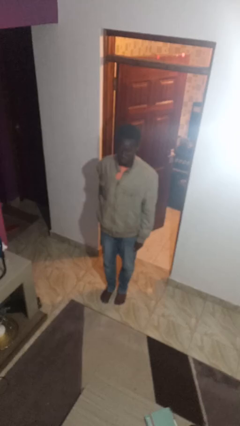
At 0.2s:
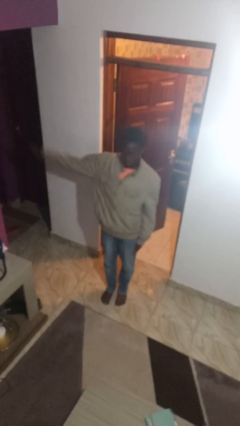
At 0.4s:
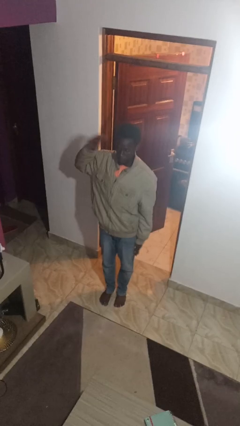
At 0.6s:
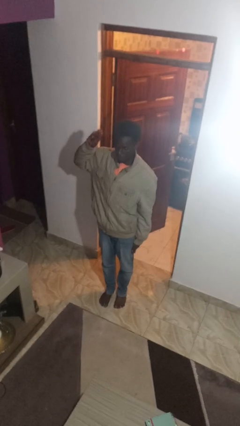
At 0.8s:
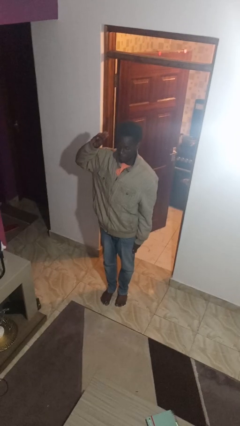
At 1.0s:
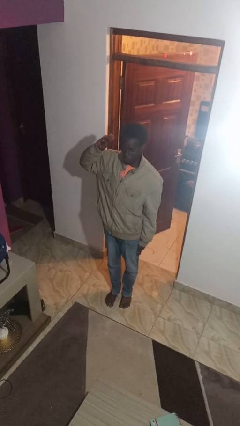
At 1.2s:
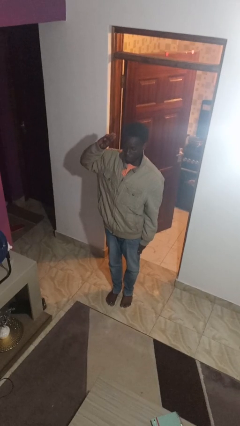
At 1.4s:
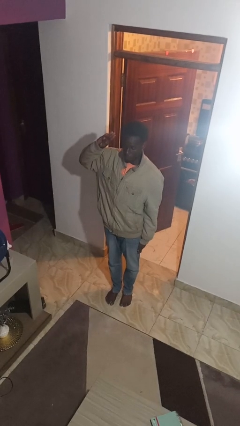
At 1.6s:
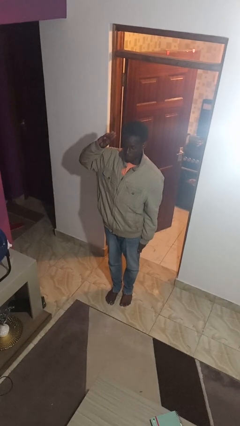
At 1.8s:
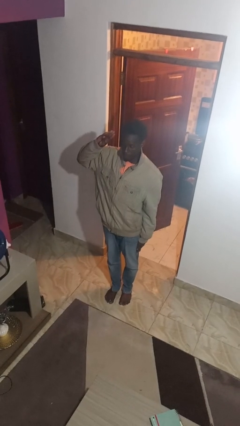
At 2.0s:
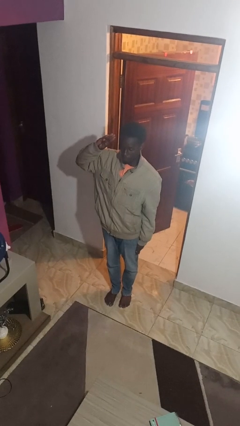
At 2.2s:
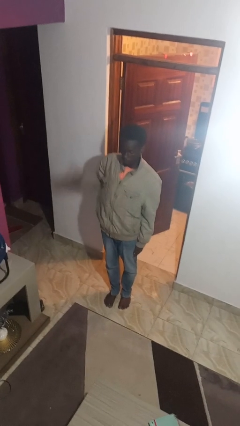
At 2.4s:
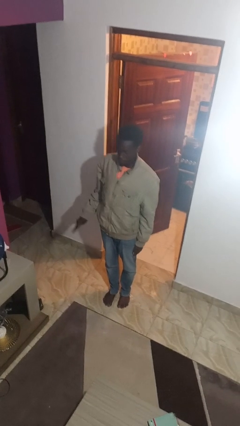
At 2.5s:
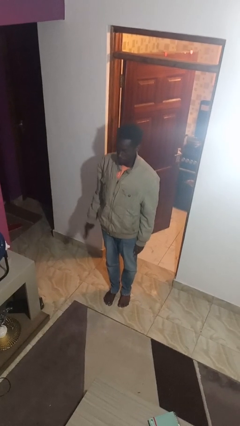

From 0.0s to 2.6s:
person salutes

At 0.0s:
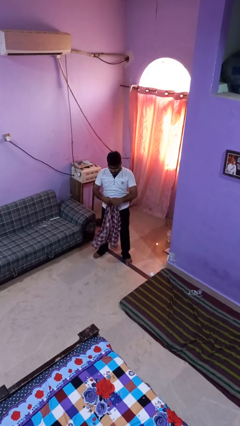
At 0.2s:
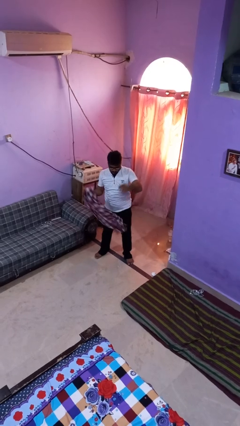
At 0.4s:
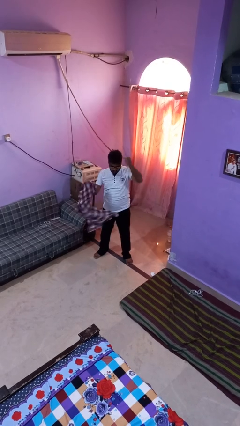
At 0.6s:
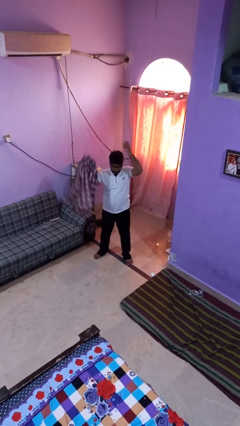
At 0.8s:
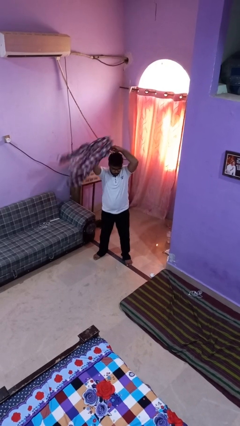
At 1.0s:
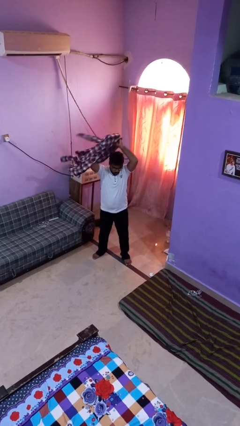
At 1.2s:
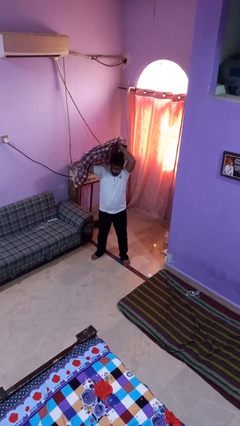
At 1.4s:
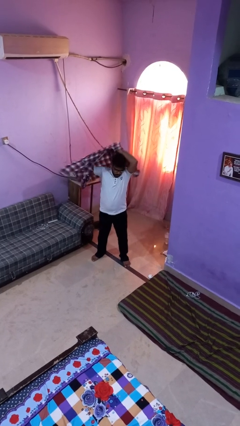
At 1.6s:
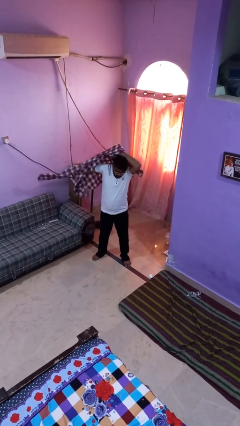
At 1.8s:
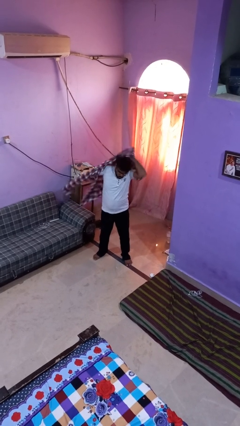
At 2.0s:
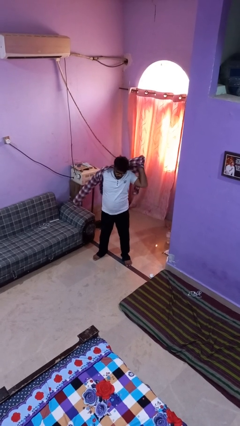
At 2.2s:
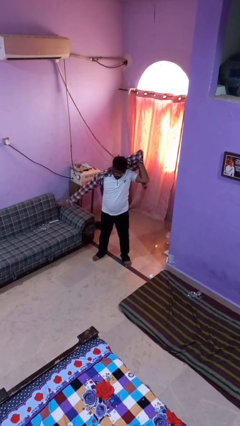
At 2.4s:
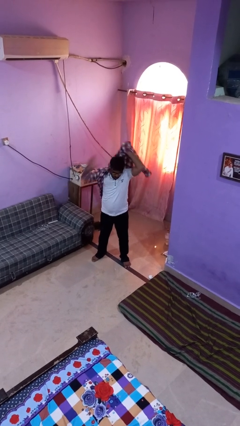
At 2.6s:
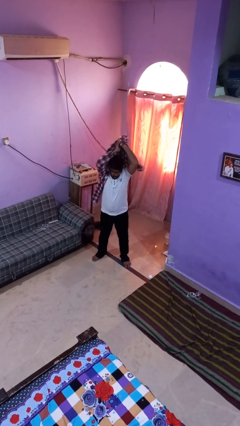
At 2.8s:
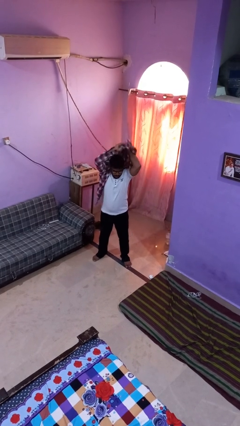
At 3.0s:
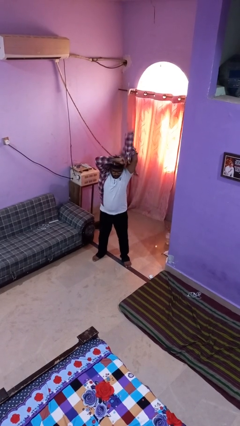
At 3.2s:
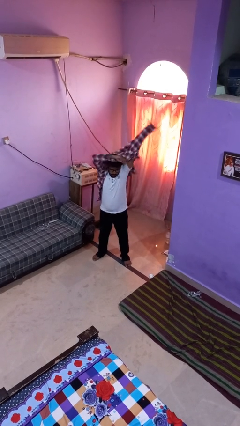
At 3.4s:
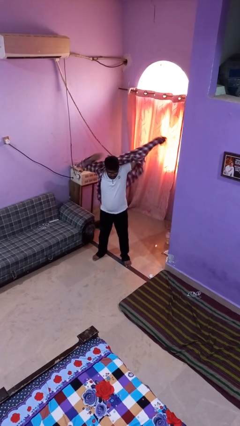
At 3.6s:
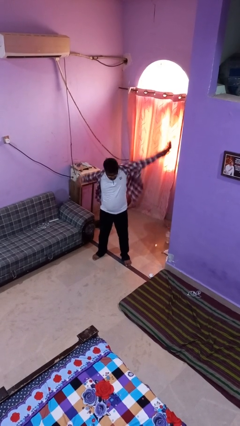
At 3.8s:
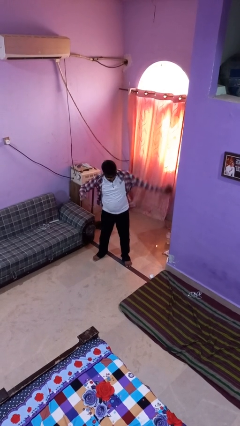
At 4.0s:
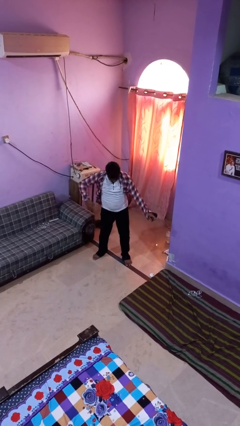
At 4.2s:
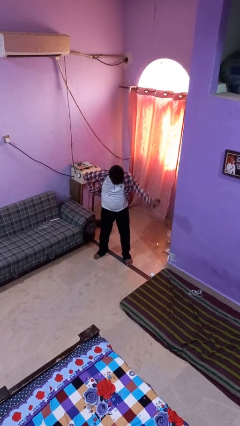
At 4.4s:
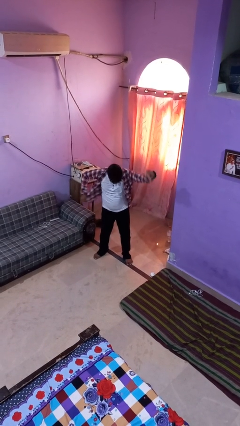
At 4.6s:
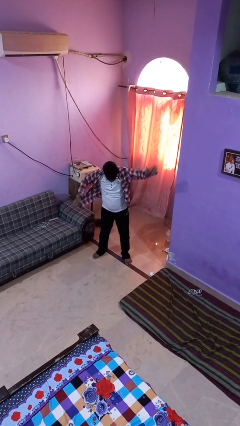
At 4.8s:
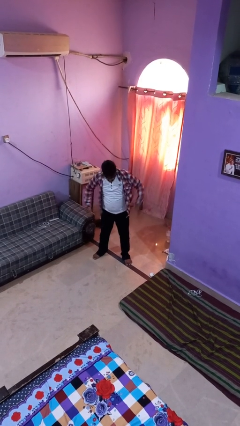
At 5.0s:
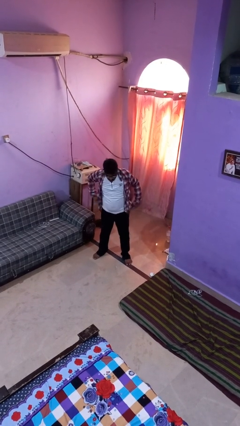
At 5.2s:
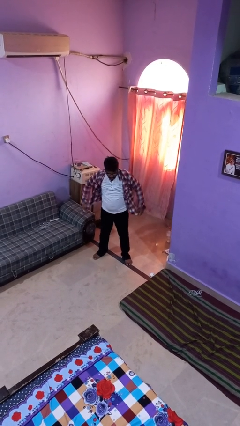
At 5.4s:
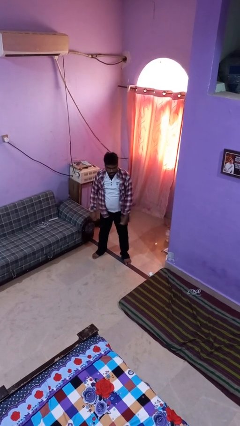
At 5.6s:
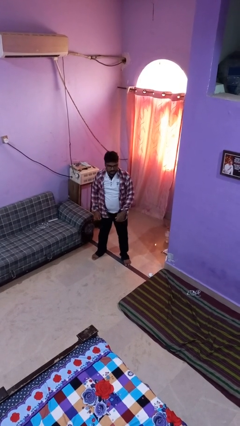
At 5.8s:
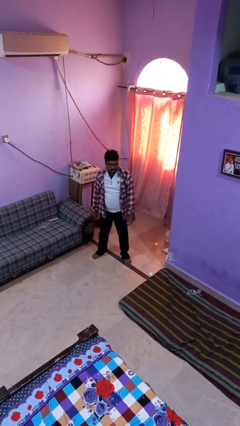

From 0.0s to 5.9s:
person puts on shirt

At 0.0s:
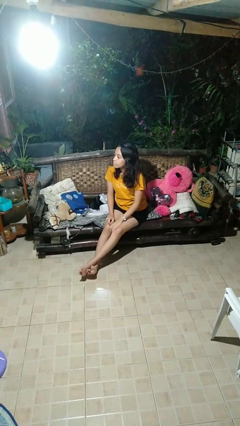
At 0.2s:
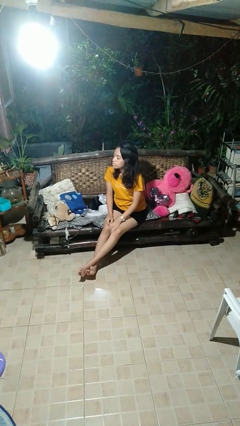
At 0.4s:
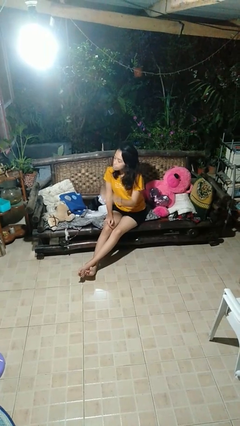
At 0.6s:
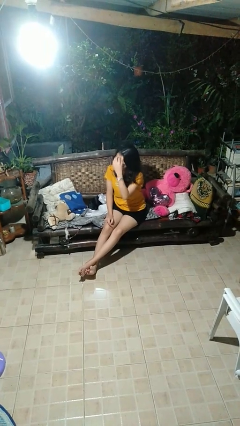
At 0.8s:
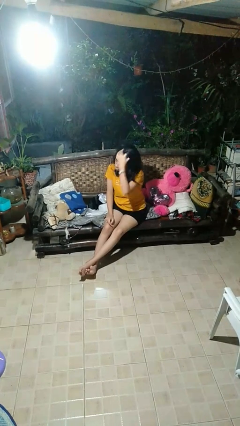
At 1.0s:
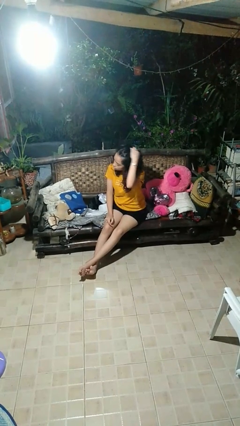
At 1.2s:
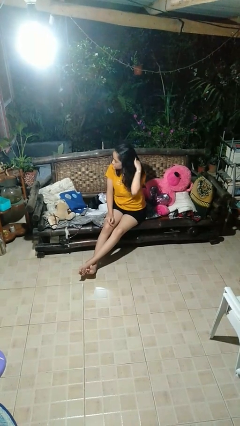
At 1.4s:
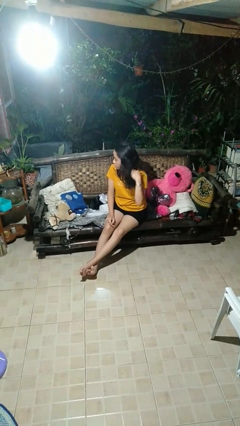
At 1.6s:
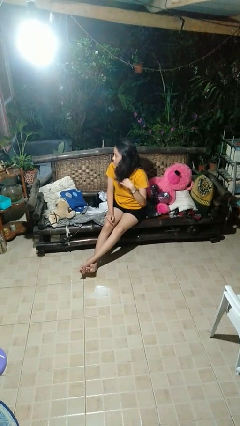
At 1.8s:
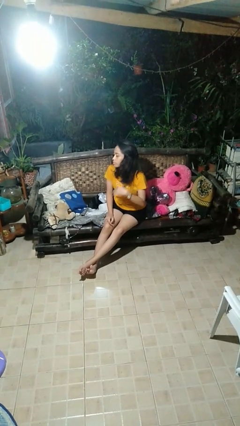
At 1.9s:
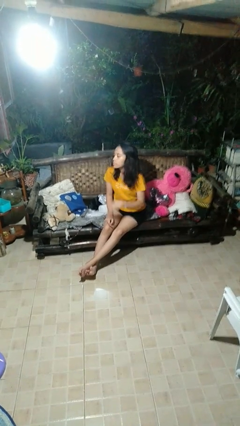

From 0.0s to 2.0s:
person strokes hair

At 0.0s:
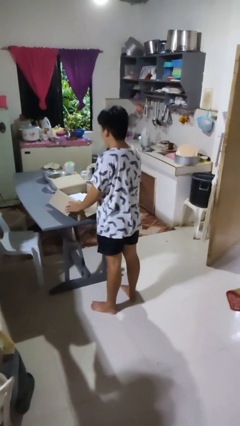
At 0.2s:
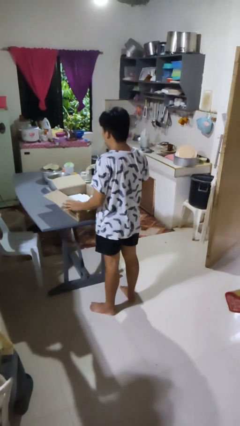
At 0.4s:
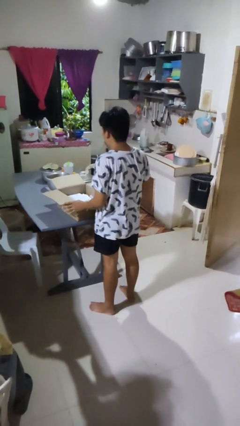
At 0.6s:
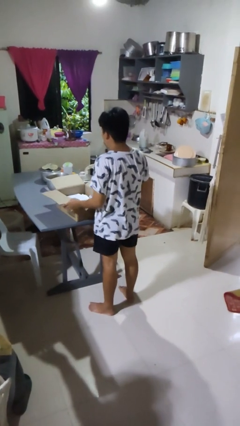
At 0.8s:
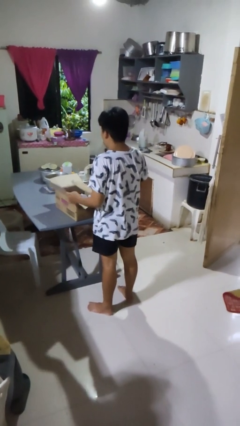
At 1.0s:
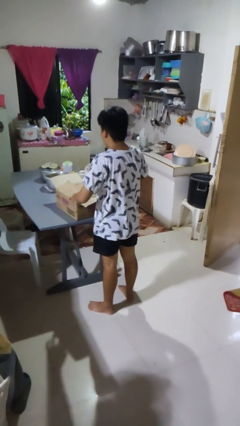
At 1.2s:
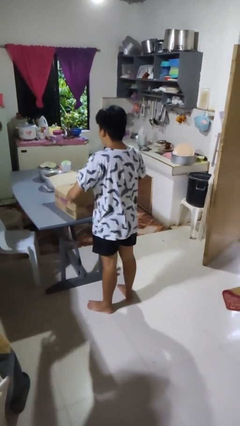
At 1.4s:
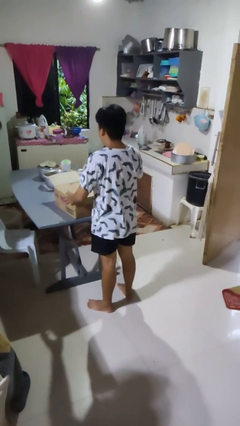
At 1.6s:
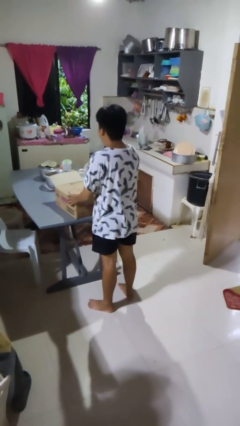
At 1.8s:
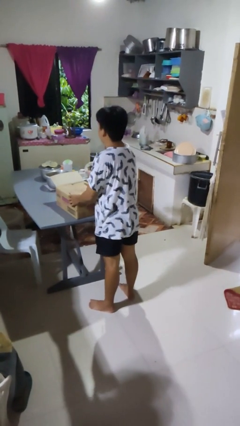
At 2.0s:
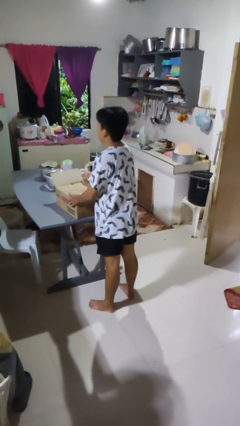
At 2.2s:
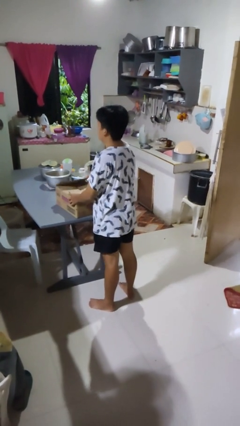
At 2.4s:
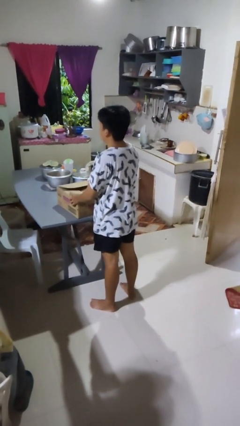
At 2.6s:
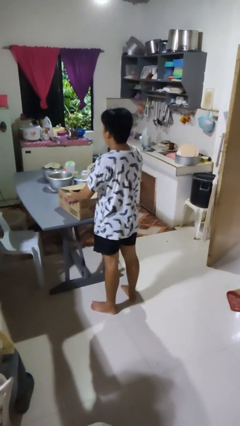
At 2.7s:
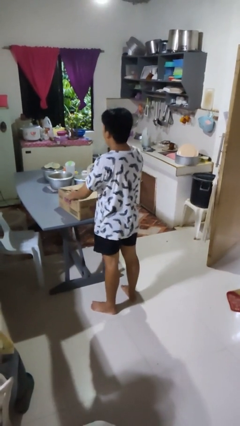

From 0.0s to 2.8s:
person closes box

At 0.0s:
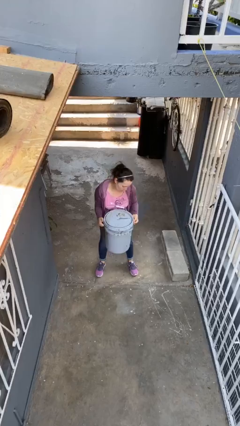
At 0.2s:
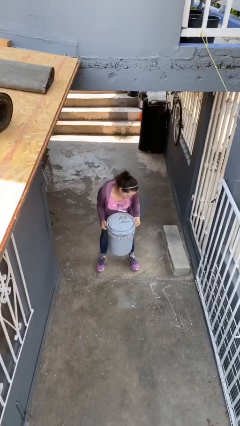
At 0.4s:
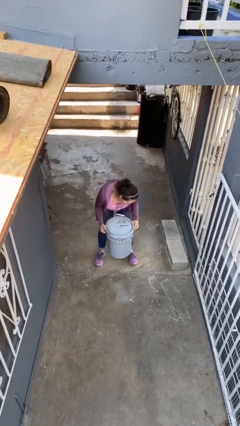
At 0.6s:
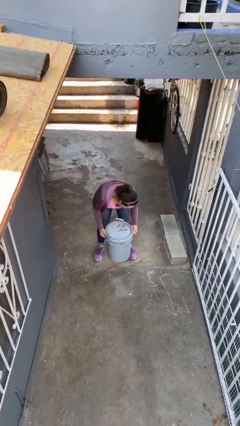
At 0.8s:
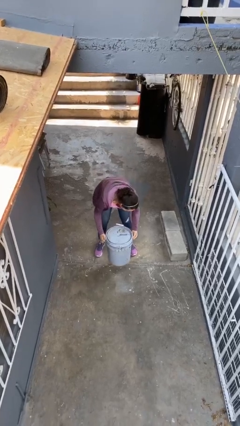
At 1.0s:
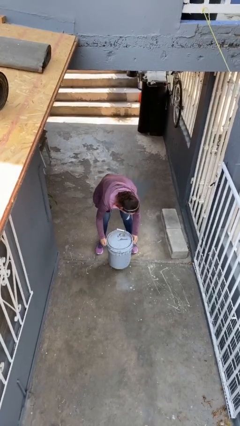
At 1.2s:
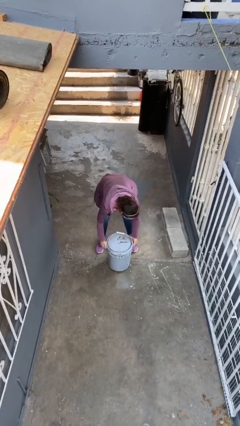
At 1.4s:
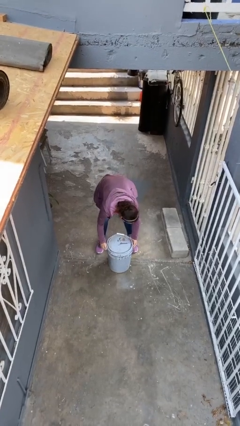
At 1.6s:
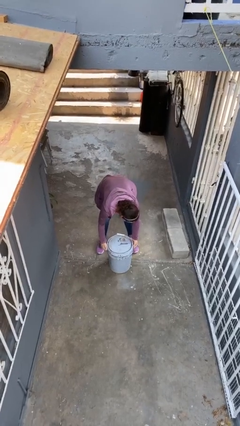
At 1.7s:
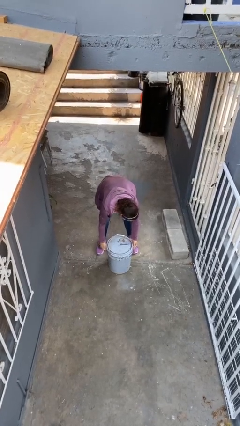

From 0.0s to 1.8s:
person puts down object on floor

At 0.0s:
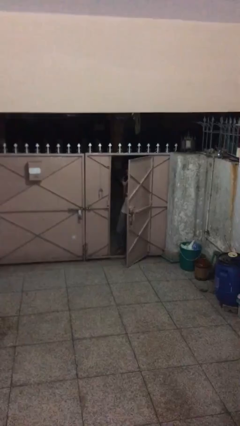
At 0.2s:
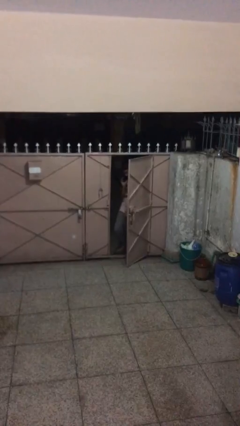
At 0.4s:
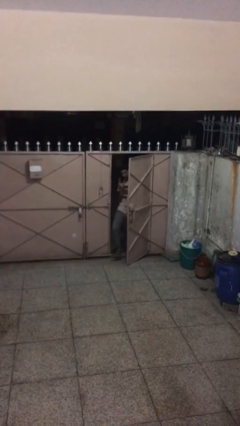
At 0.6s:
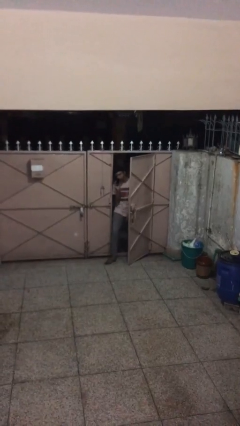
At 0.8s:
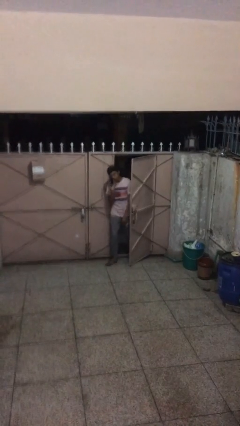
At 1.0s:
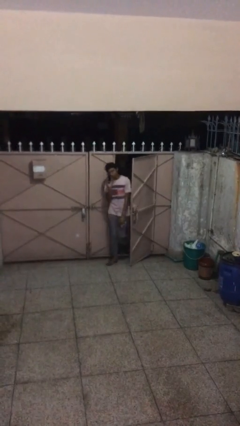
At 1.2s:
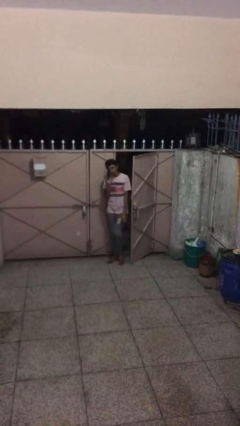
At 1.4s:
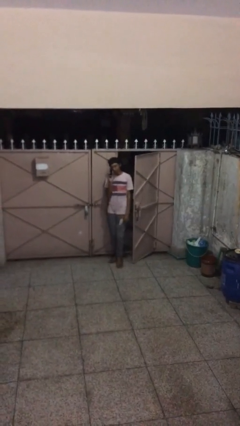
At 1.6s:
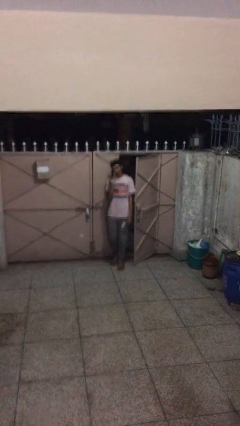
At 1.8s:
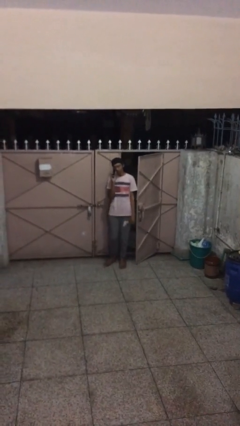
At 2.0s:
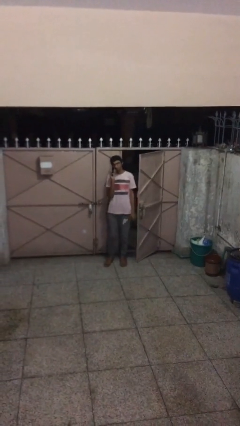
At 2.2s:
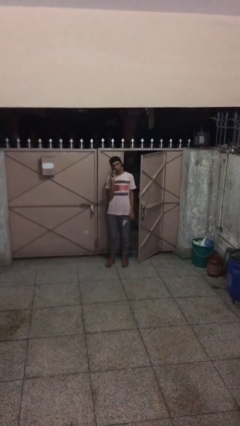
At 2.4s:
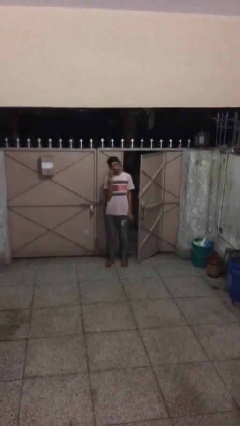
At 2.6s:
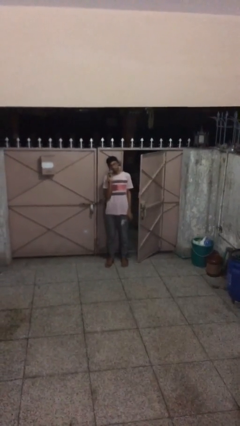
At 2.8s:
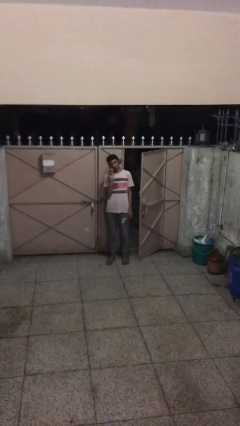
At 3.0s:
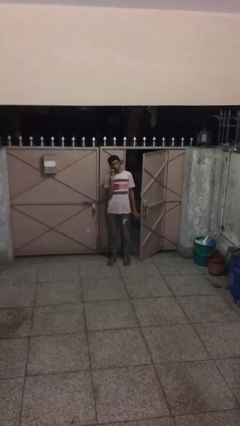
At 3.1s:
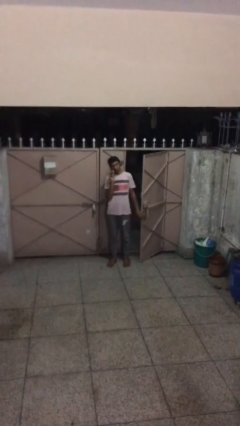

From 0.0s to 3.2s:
person enters scene through structure
